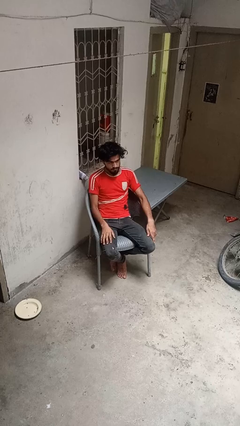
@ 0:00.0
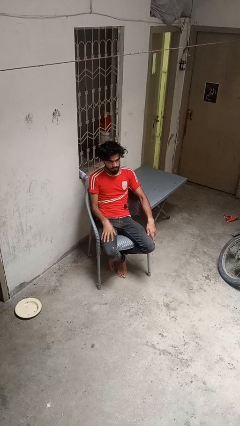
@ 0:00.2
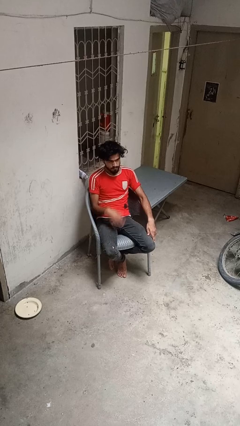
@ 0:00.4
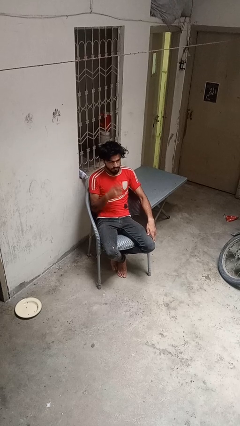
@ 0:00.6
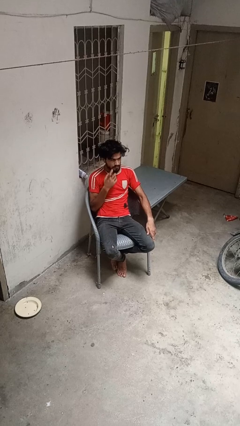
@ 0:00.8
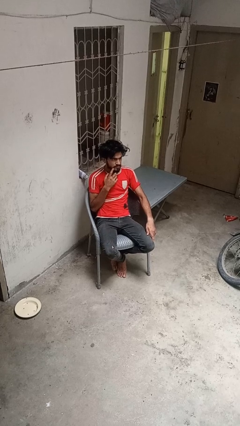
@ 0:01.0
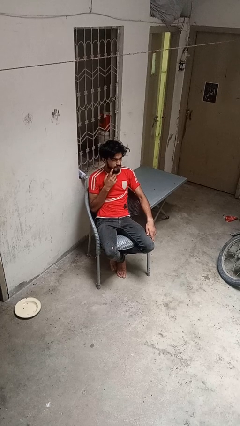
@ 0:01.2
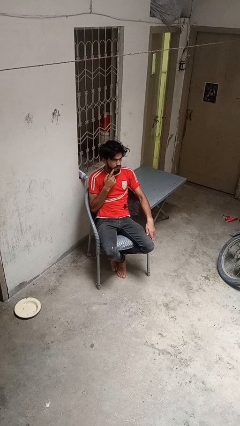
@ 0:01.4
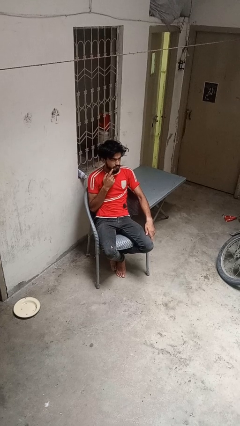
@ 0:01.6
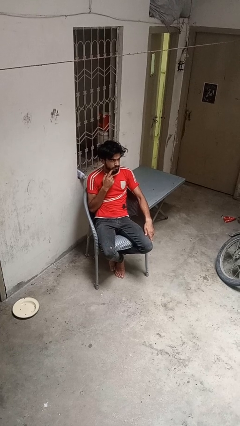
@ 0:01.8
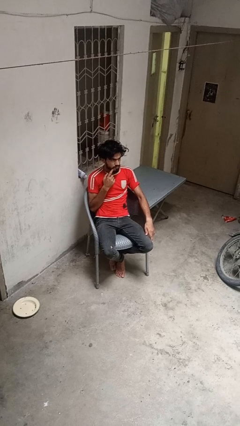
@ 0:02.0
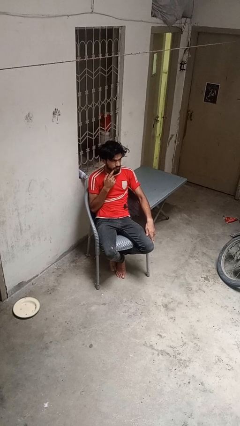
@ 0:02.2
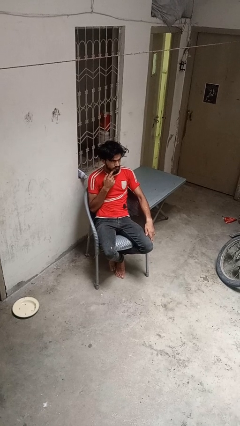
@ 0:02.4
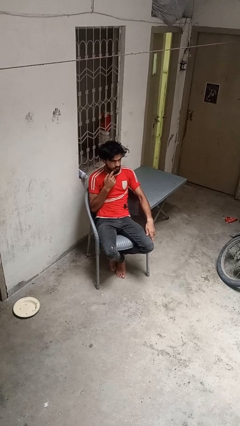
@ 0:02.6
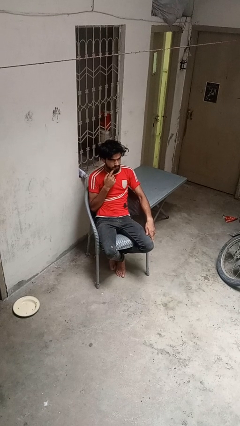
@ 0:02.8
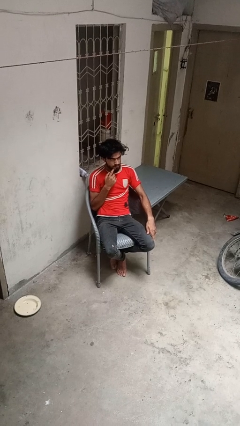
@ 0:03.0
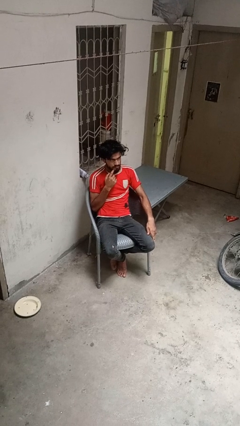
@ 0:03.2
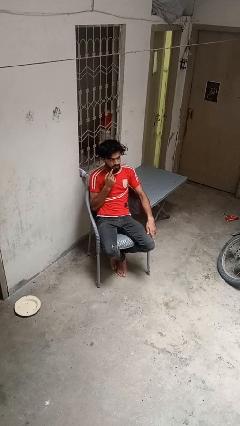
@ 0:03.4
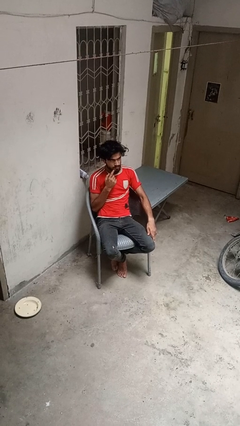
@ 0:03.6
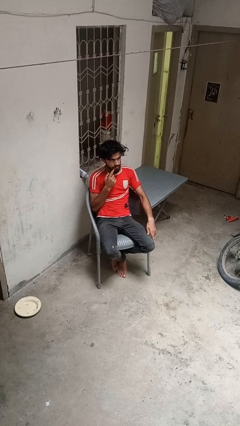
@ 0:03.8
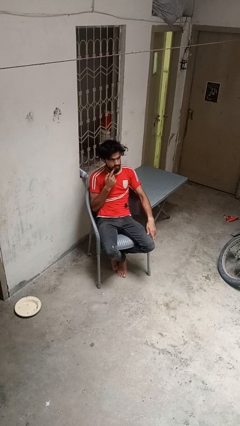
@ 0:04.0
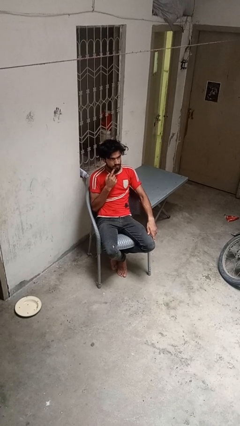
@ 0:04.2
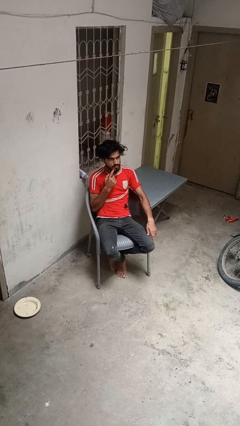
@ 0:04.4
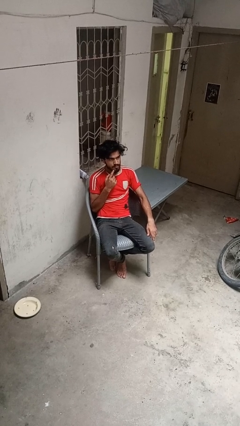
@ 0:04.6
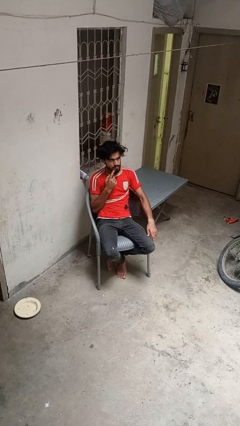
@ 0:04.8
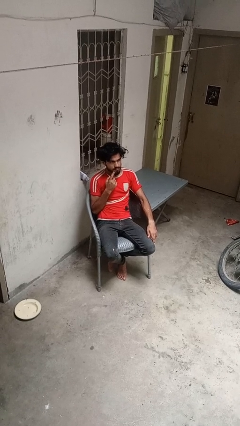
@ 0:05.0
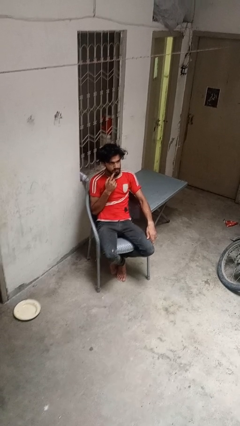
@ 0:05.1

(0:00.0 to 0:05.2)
person strokes chin

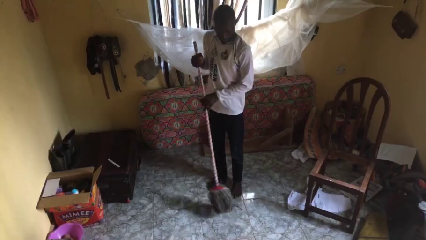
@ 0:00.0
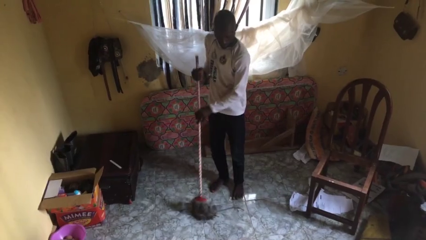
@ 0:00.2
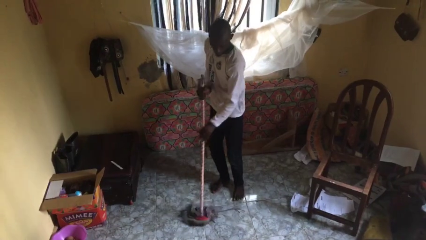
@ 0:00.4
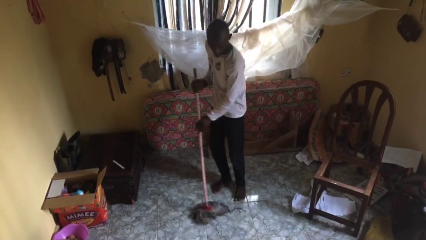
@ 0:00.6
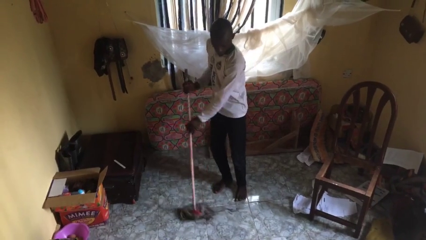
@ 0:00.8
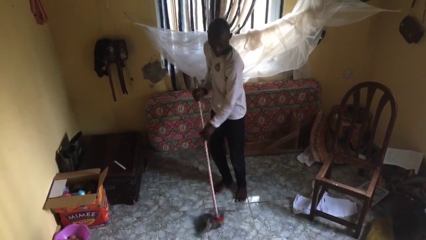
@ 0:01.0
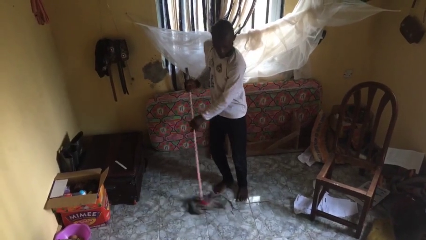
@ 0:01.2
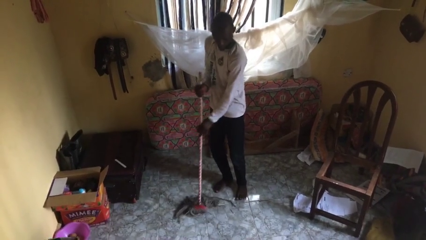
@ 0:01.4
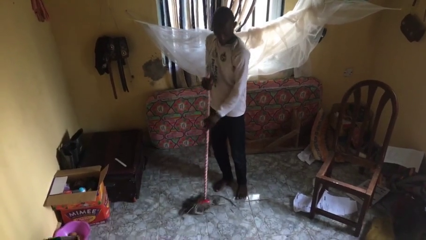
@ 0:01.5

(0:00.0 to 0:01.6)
person mops

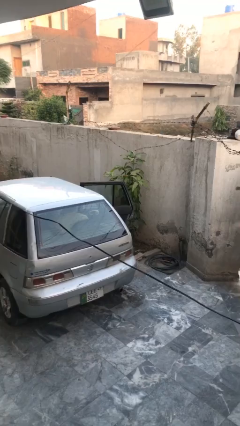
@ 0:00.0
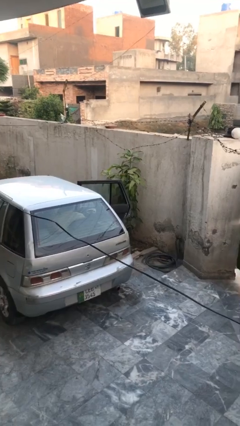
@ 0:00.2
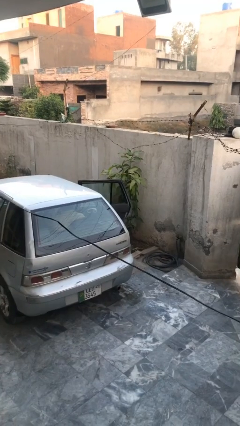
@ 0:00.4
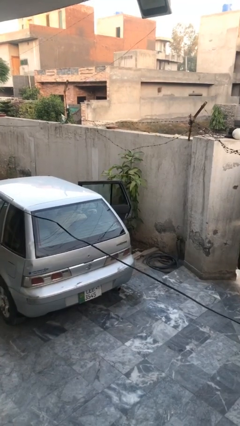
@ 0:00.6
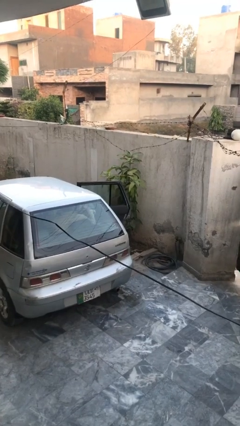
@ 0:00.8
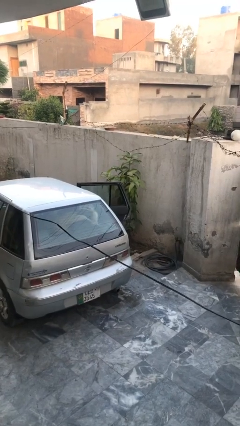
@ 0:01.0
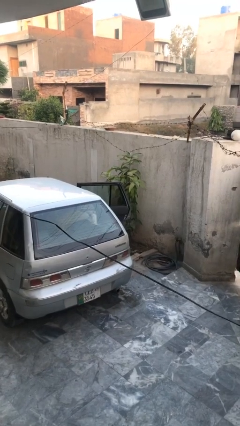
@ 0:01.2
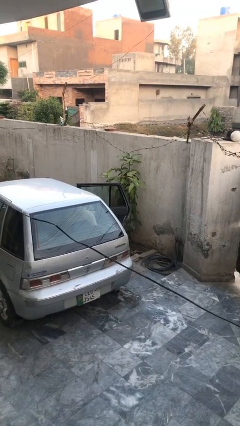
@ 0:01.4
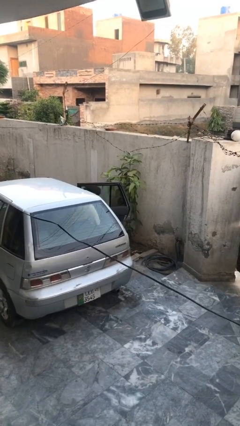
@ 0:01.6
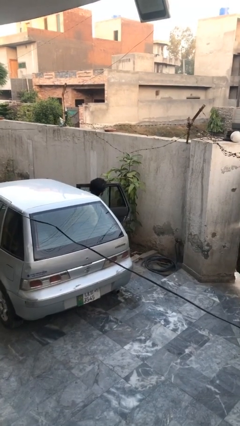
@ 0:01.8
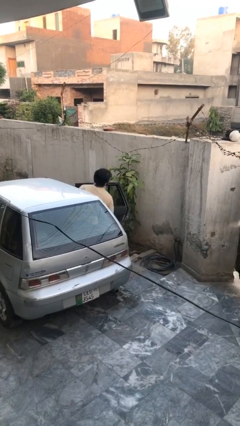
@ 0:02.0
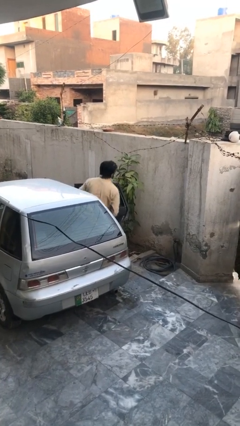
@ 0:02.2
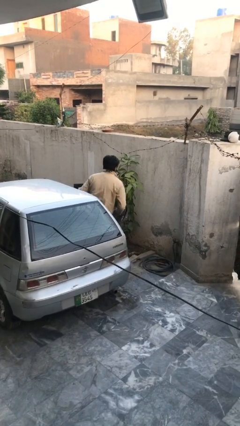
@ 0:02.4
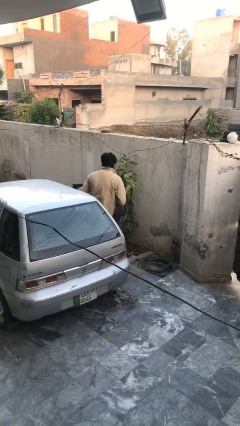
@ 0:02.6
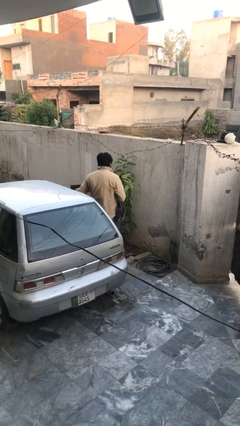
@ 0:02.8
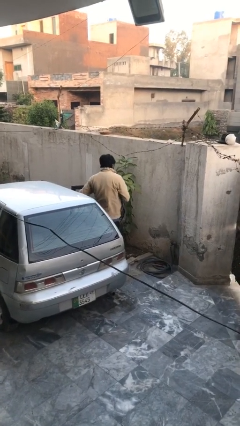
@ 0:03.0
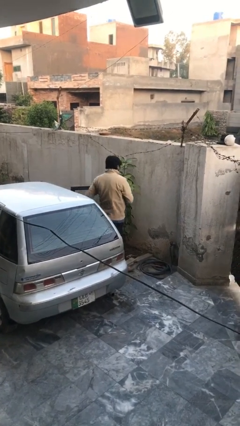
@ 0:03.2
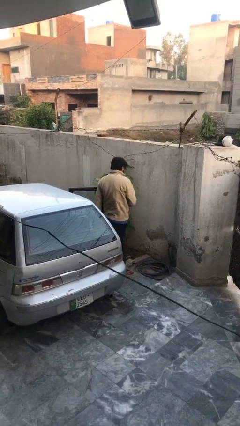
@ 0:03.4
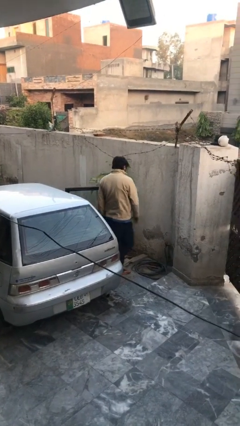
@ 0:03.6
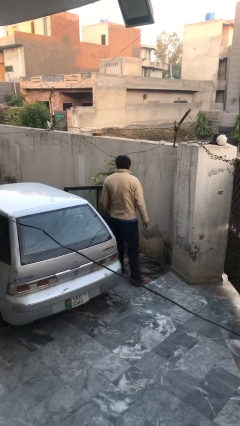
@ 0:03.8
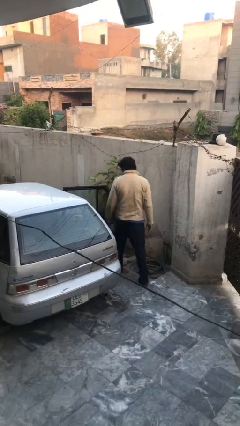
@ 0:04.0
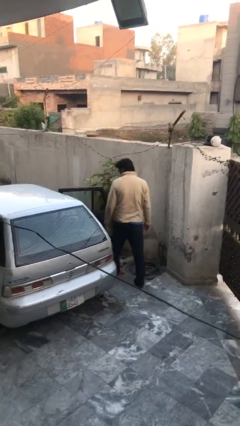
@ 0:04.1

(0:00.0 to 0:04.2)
person exits car

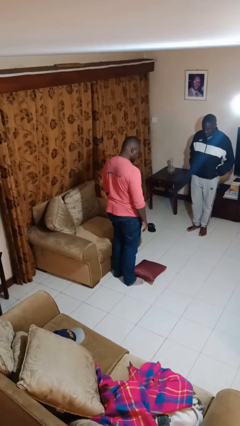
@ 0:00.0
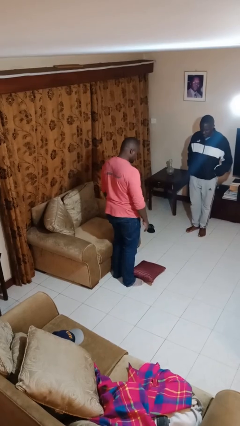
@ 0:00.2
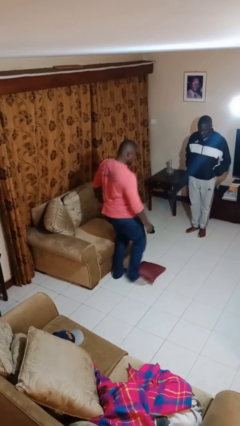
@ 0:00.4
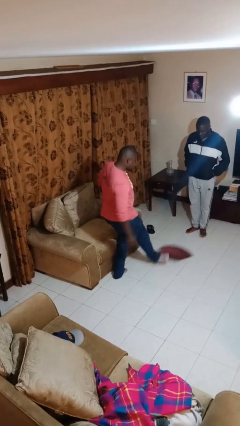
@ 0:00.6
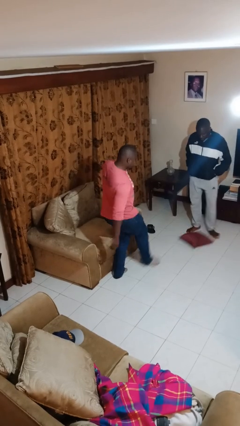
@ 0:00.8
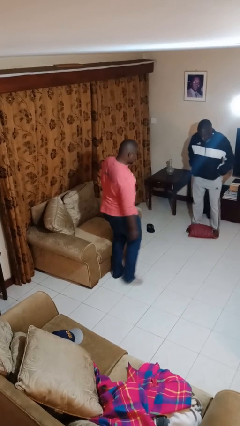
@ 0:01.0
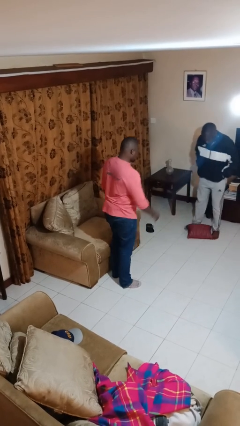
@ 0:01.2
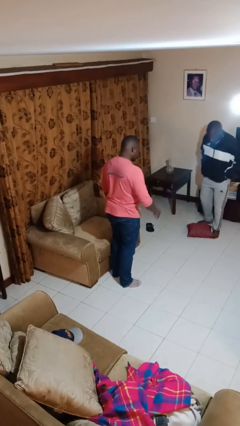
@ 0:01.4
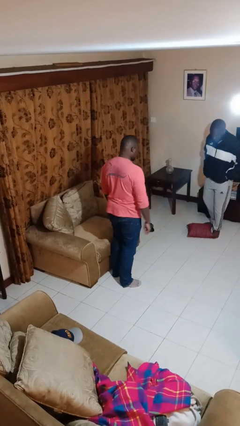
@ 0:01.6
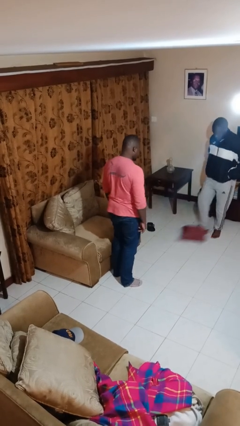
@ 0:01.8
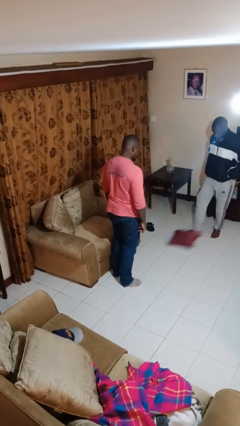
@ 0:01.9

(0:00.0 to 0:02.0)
person kicks object to person

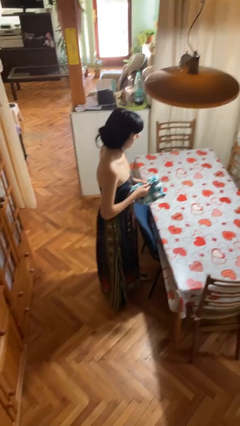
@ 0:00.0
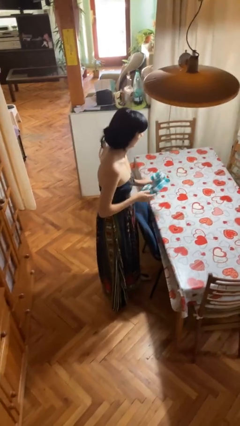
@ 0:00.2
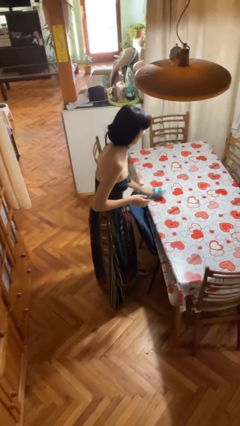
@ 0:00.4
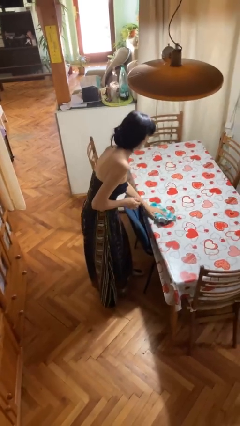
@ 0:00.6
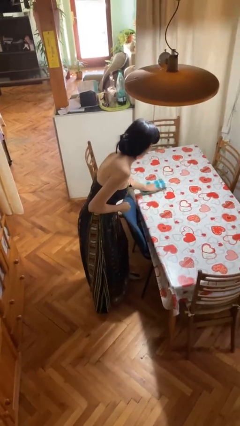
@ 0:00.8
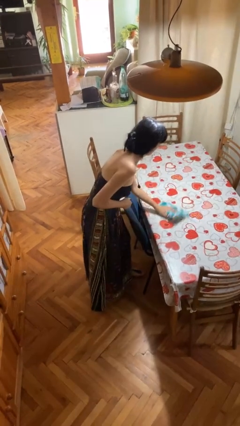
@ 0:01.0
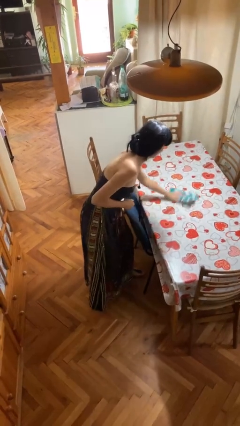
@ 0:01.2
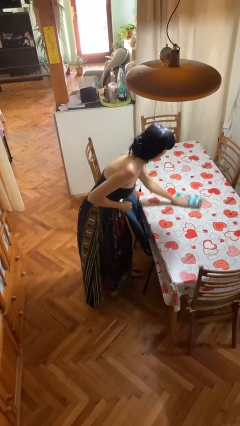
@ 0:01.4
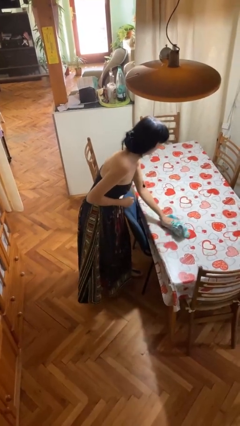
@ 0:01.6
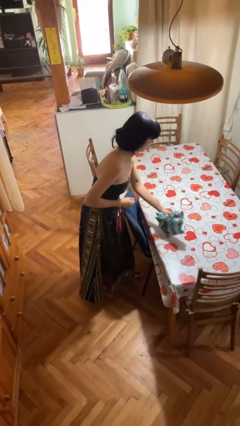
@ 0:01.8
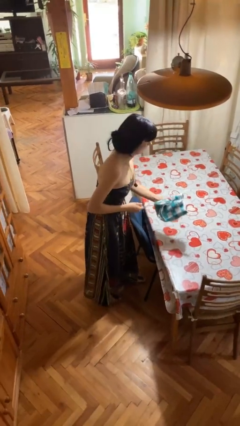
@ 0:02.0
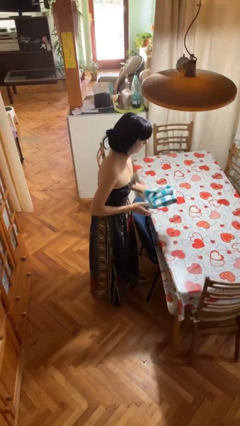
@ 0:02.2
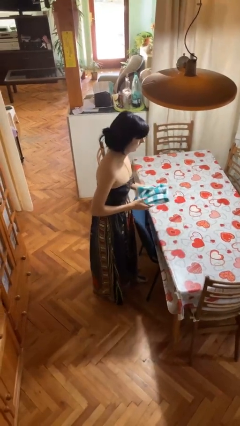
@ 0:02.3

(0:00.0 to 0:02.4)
person cleans table with rag

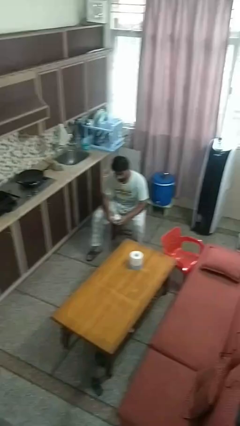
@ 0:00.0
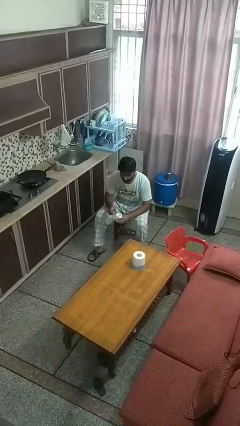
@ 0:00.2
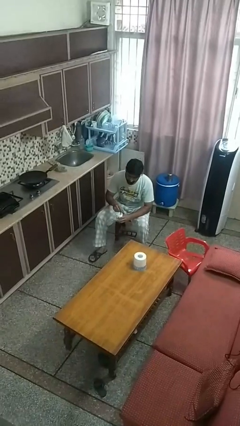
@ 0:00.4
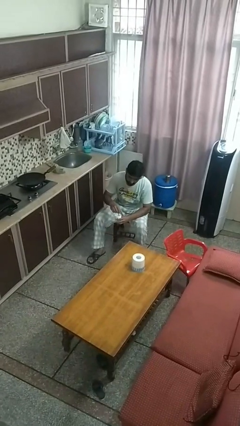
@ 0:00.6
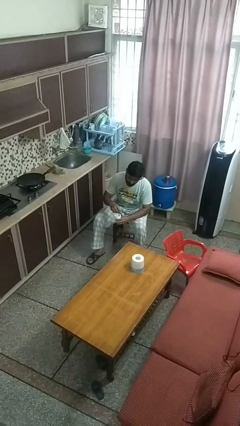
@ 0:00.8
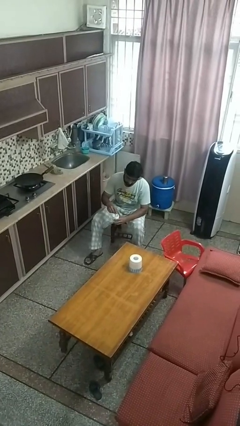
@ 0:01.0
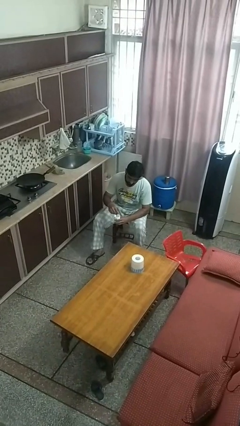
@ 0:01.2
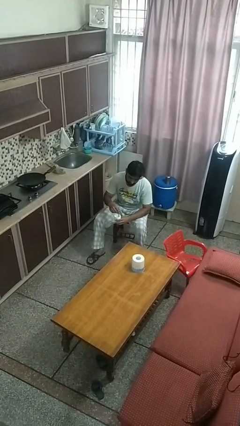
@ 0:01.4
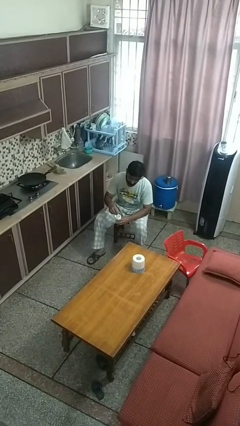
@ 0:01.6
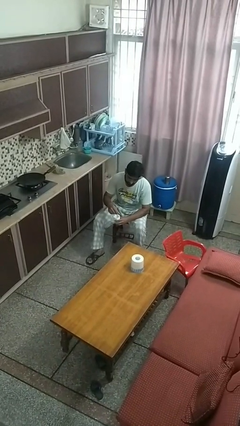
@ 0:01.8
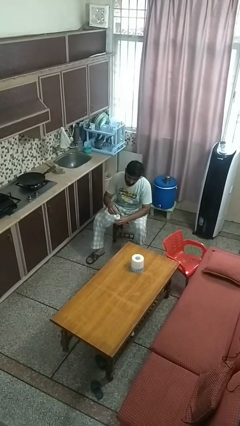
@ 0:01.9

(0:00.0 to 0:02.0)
person stirs mug

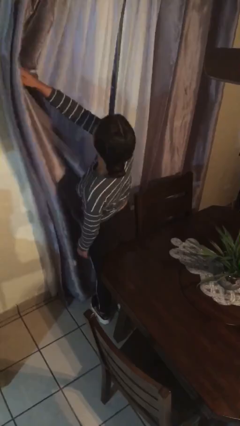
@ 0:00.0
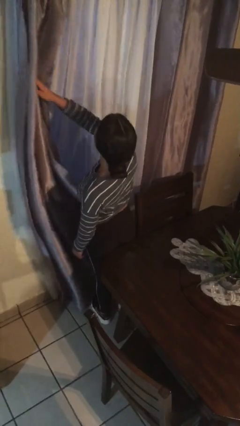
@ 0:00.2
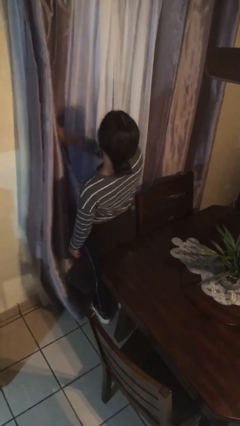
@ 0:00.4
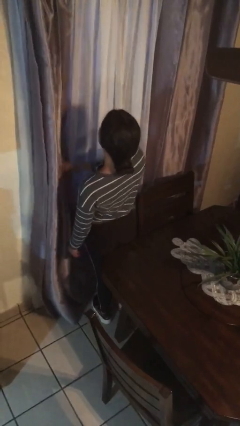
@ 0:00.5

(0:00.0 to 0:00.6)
person opens curtains
